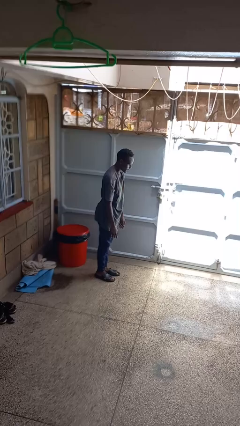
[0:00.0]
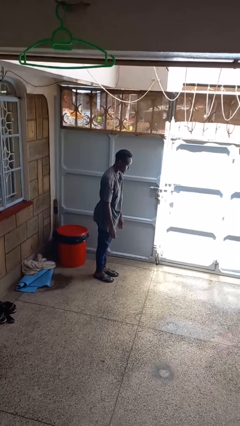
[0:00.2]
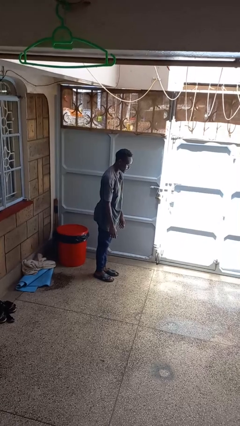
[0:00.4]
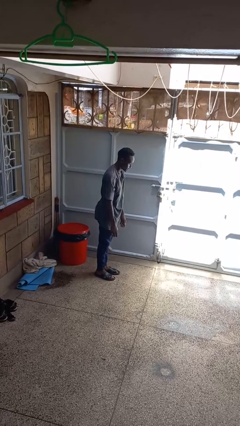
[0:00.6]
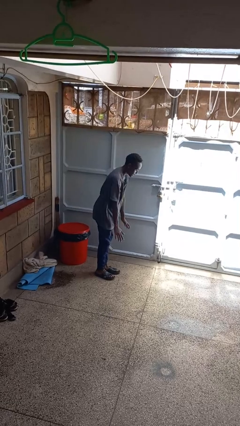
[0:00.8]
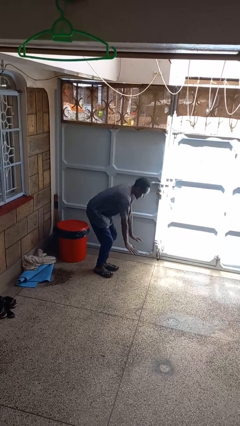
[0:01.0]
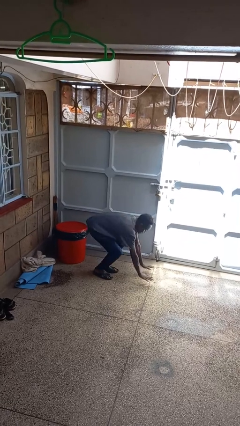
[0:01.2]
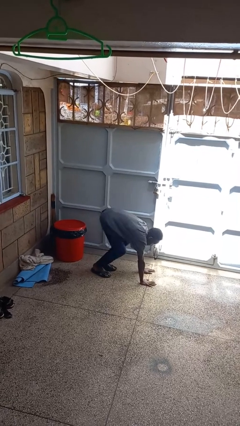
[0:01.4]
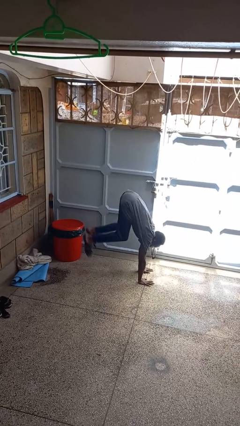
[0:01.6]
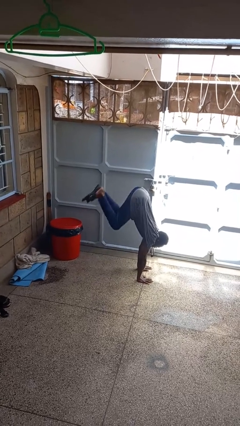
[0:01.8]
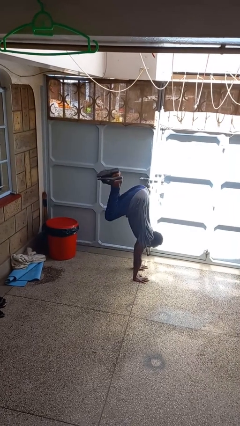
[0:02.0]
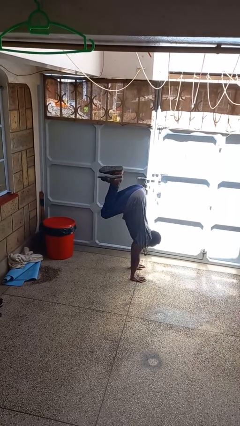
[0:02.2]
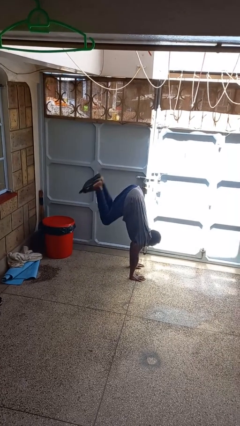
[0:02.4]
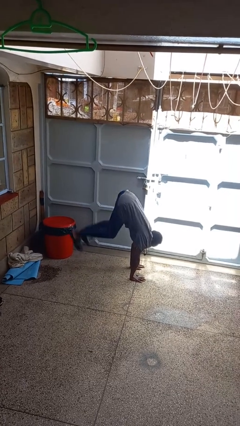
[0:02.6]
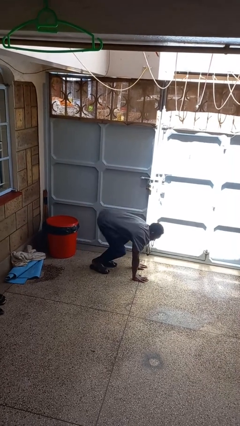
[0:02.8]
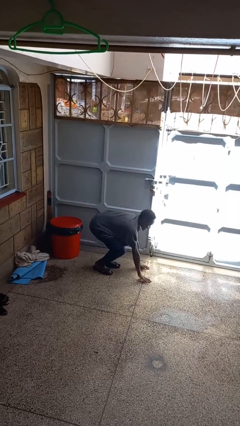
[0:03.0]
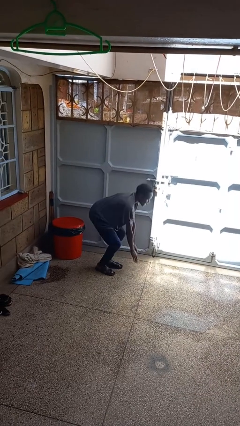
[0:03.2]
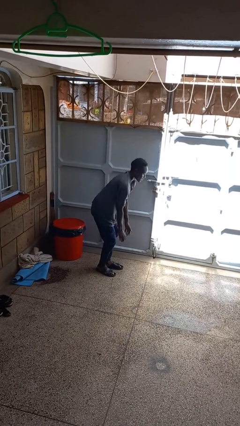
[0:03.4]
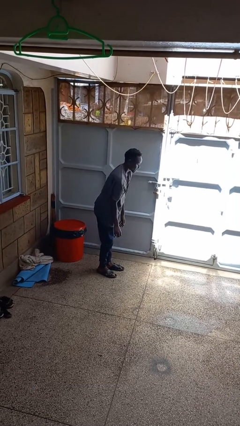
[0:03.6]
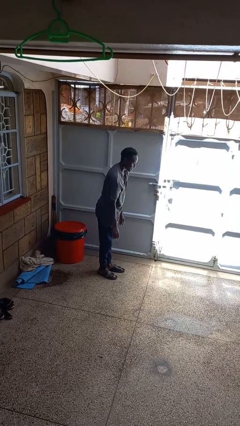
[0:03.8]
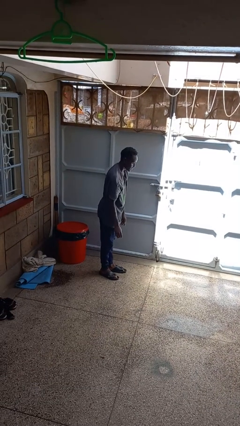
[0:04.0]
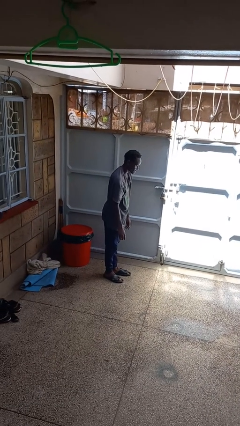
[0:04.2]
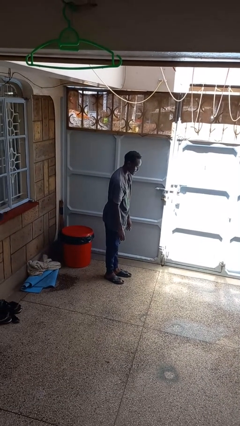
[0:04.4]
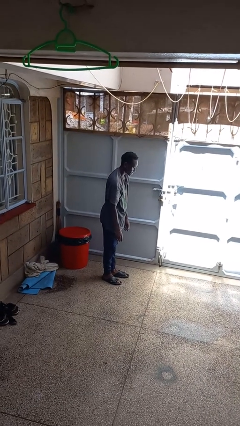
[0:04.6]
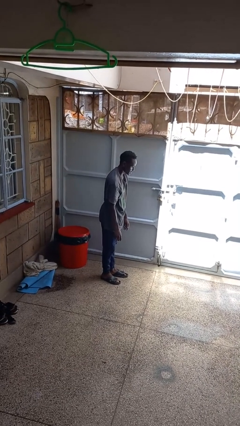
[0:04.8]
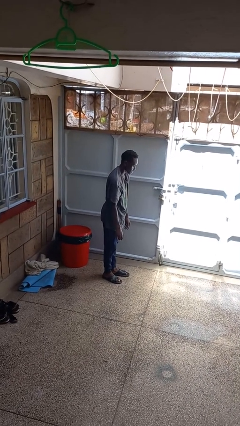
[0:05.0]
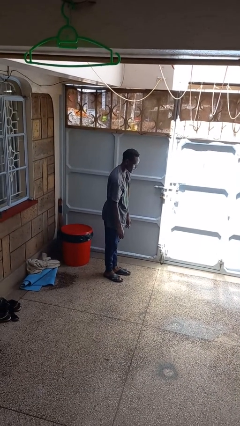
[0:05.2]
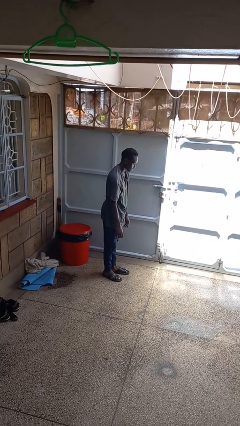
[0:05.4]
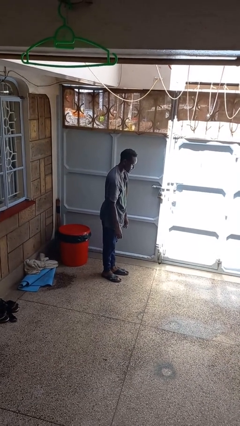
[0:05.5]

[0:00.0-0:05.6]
person handstand

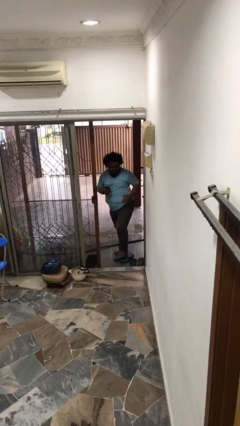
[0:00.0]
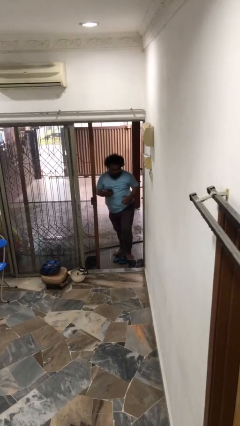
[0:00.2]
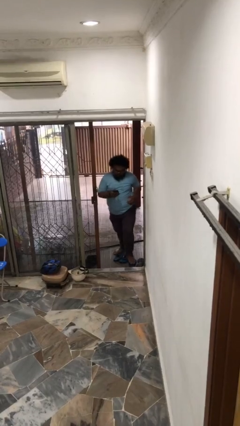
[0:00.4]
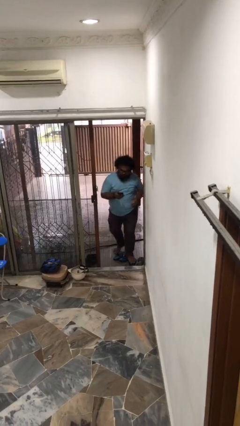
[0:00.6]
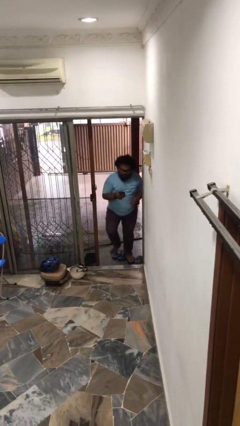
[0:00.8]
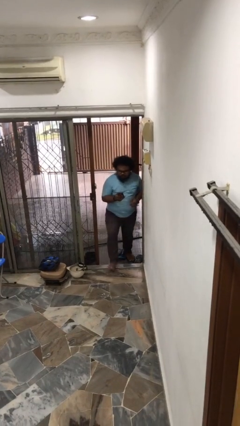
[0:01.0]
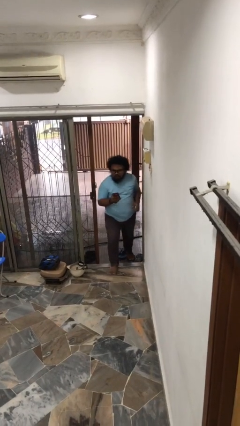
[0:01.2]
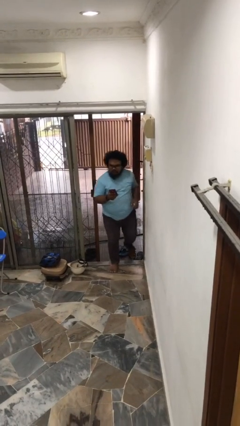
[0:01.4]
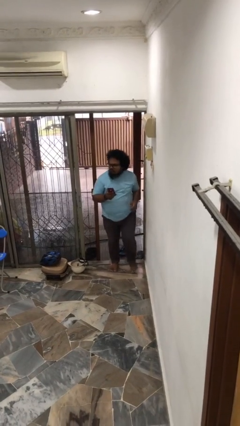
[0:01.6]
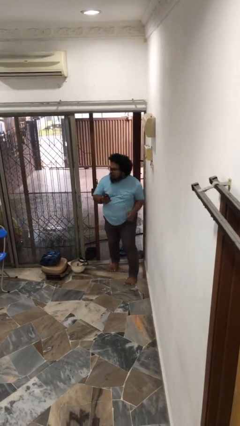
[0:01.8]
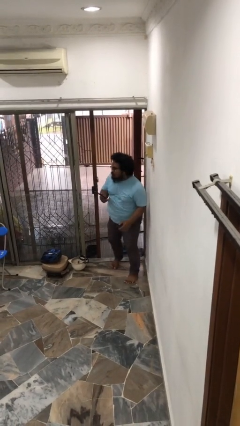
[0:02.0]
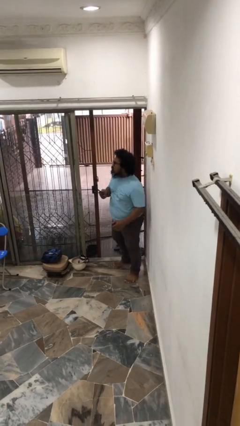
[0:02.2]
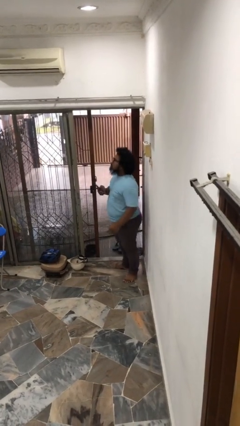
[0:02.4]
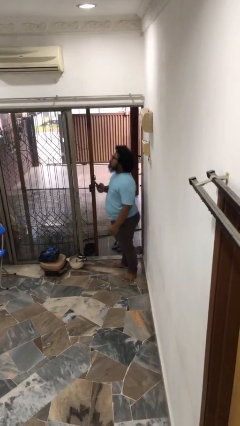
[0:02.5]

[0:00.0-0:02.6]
person enters scene through structure

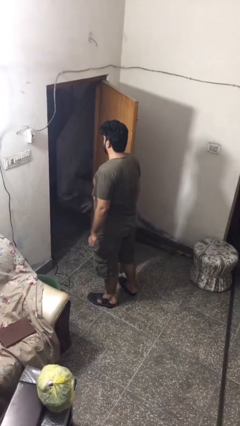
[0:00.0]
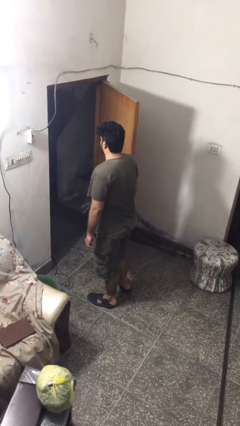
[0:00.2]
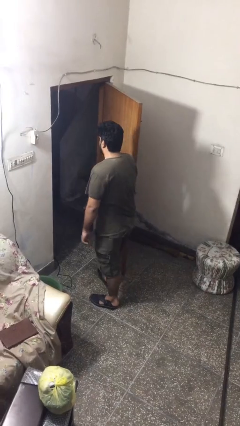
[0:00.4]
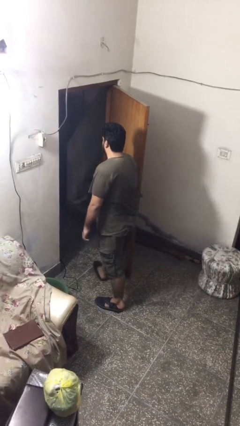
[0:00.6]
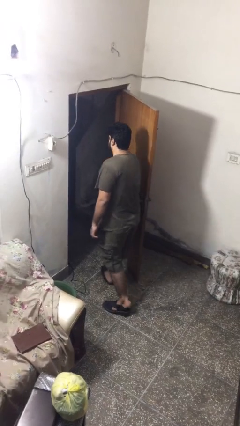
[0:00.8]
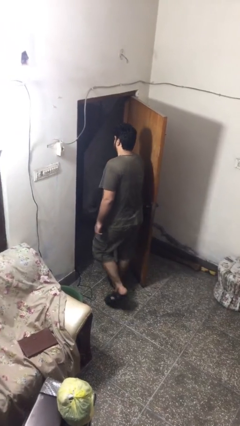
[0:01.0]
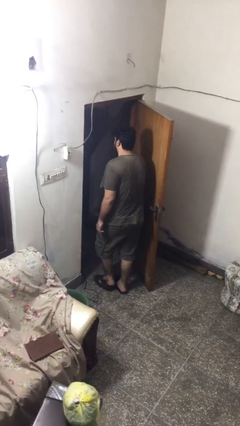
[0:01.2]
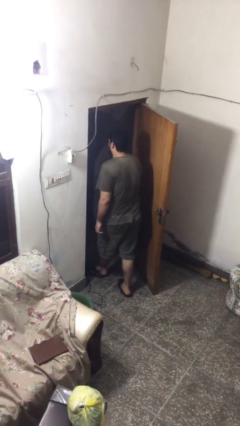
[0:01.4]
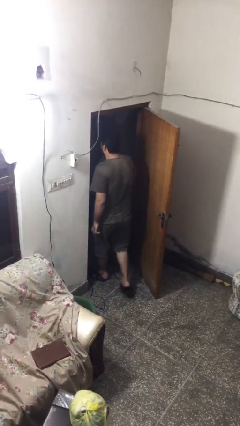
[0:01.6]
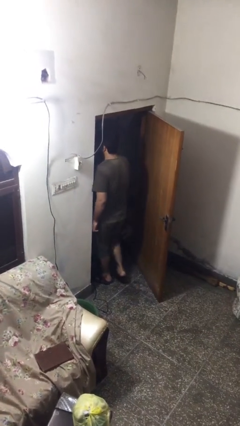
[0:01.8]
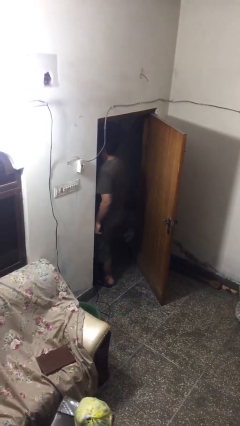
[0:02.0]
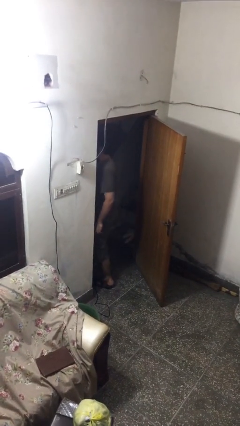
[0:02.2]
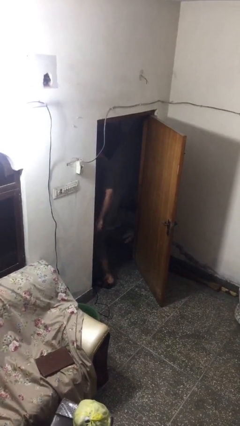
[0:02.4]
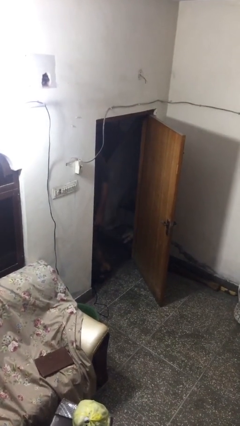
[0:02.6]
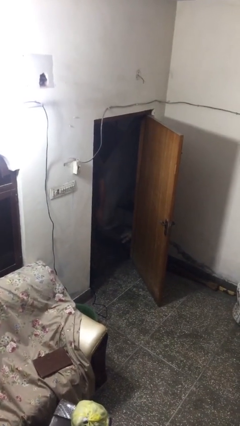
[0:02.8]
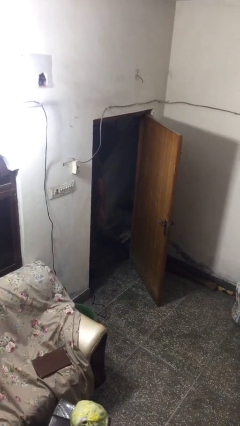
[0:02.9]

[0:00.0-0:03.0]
person exits scene through structure

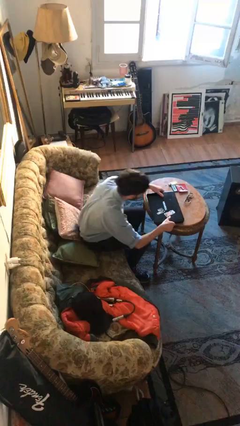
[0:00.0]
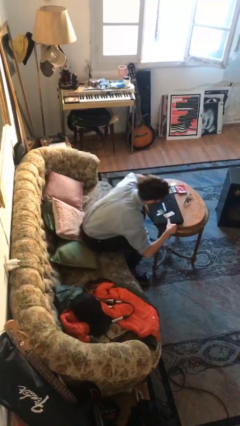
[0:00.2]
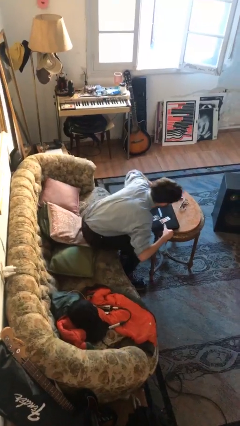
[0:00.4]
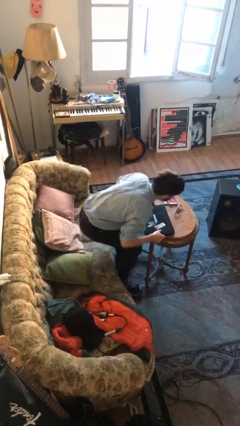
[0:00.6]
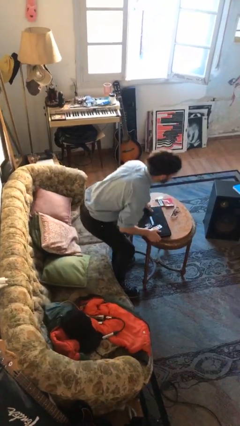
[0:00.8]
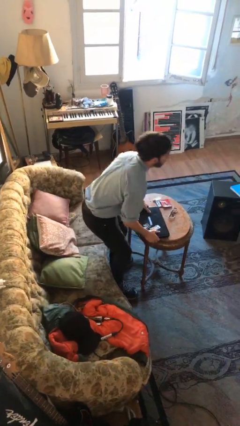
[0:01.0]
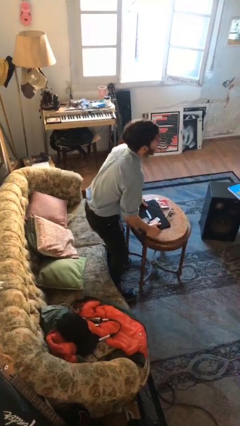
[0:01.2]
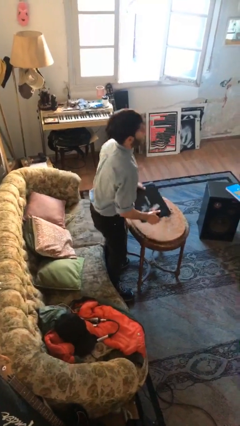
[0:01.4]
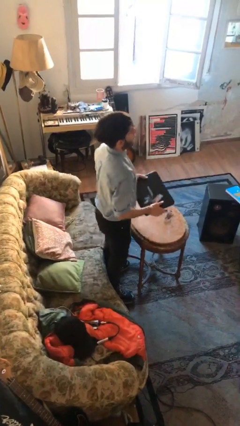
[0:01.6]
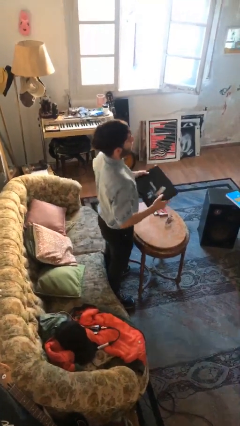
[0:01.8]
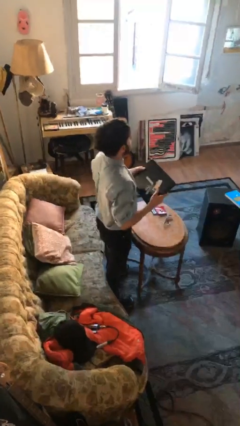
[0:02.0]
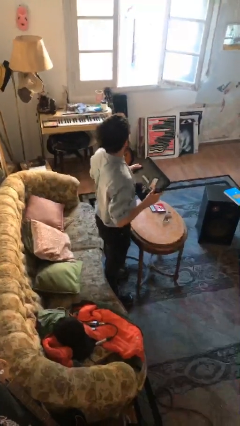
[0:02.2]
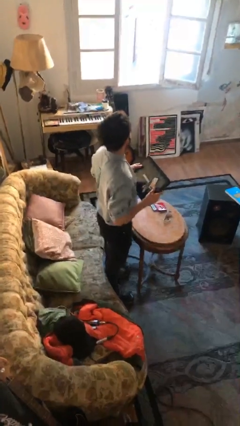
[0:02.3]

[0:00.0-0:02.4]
person stands up

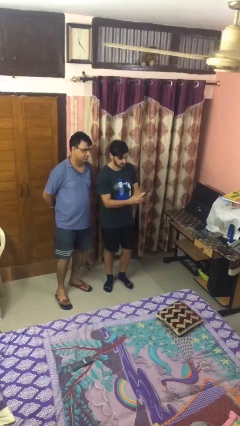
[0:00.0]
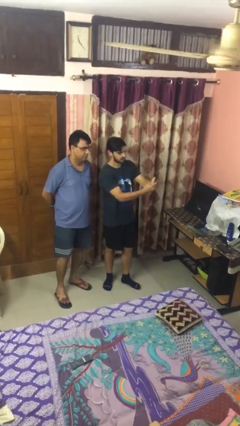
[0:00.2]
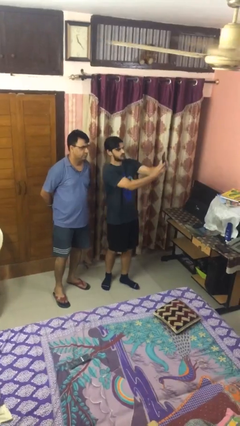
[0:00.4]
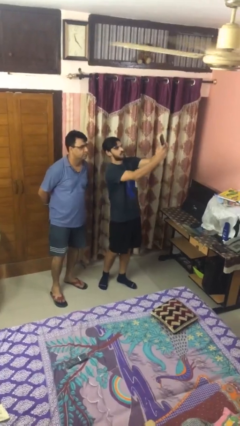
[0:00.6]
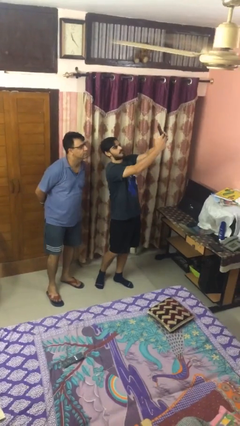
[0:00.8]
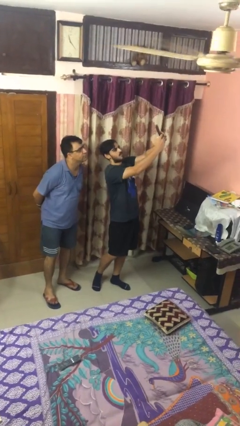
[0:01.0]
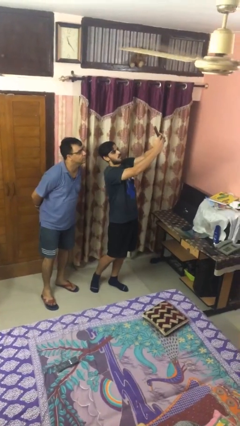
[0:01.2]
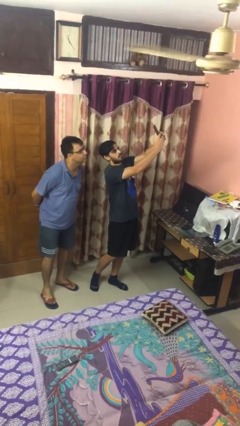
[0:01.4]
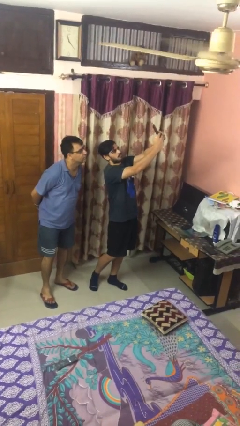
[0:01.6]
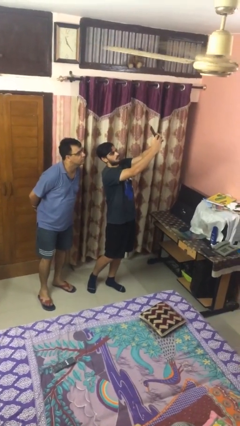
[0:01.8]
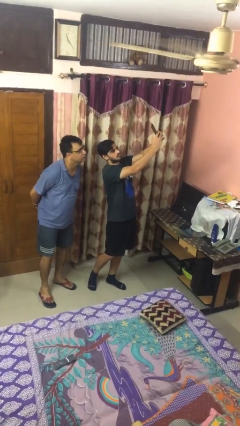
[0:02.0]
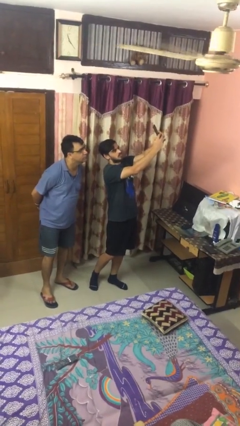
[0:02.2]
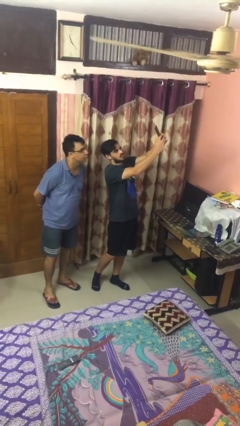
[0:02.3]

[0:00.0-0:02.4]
person takes selfie with person

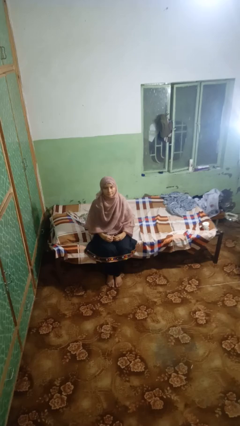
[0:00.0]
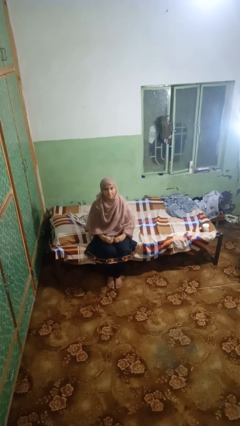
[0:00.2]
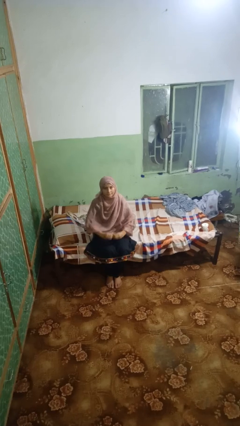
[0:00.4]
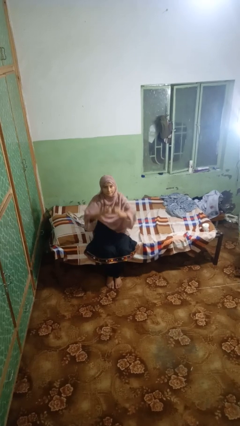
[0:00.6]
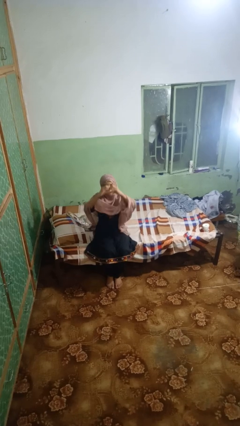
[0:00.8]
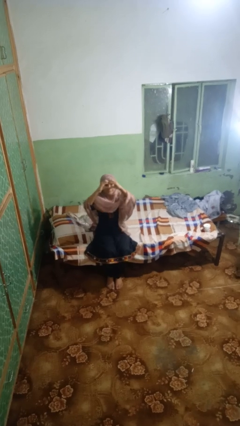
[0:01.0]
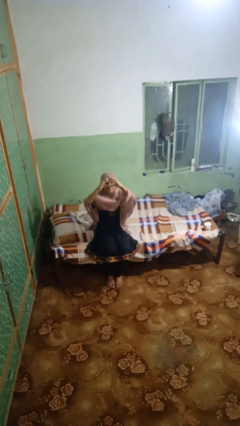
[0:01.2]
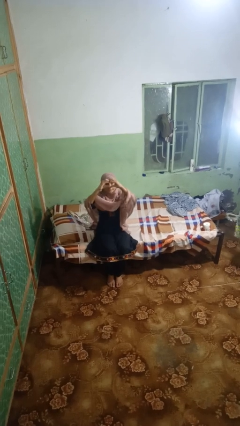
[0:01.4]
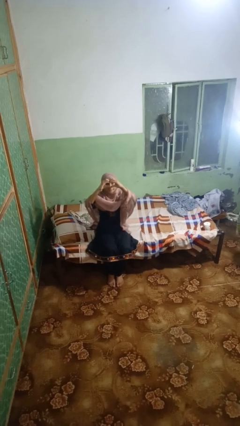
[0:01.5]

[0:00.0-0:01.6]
person gestures heart
